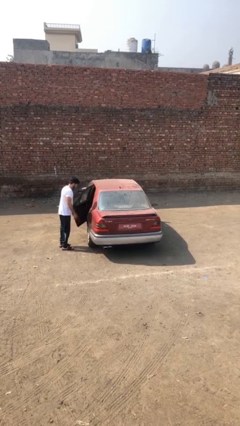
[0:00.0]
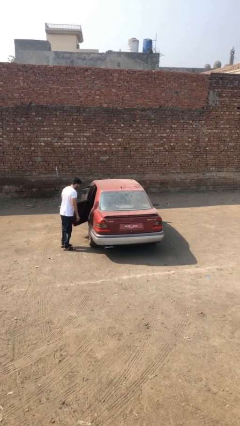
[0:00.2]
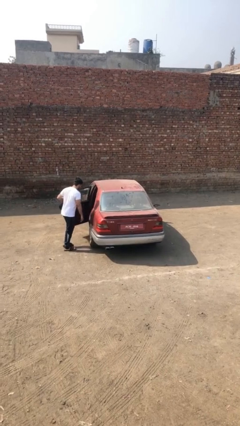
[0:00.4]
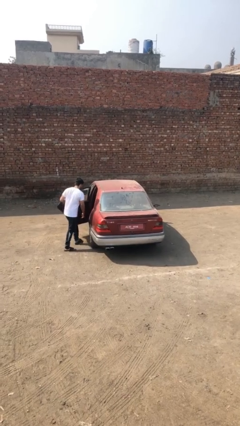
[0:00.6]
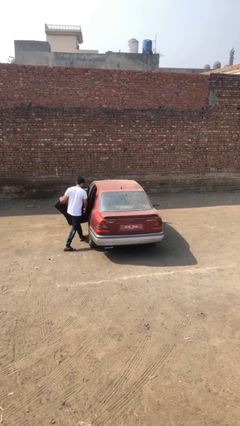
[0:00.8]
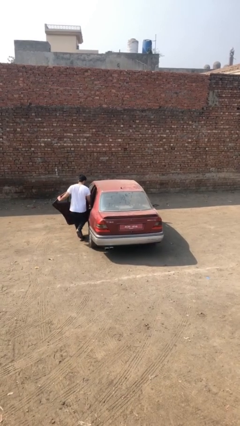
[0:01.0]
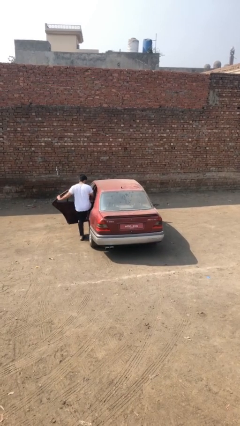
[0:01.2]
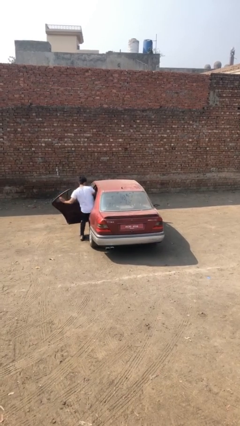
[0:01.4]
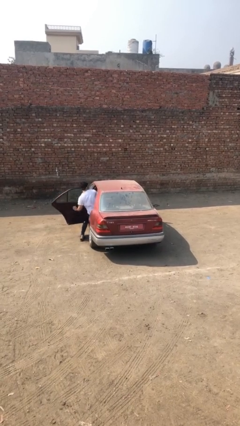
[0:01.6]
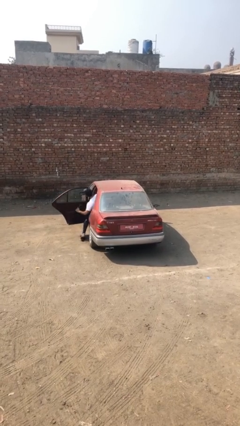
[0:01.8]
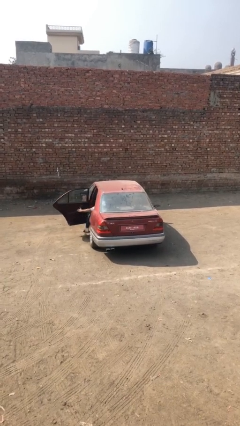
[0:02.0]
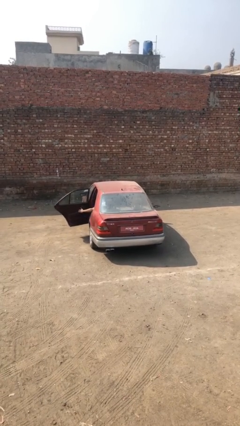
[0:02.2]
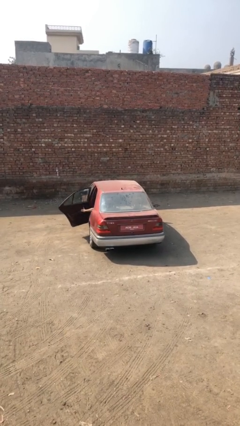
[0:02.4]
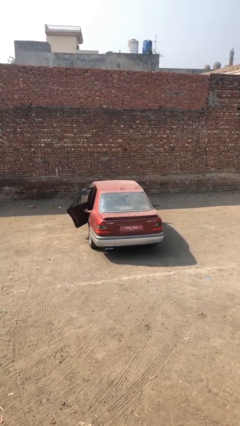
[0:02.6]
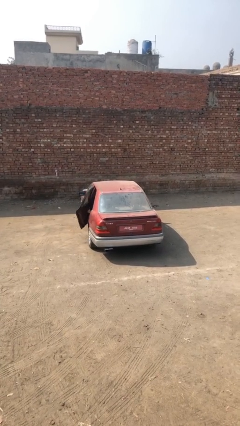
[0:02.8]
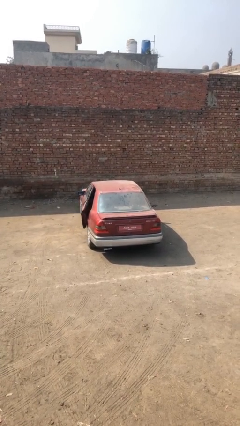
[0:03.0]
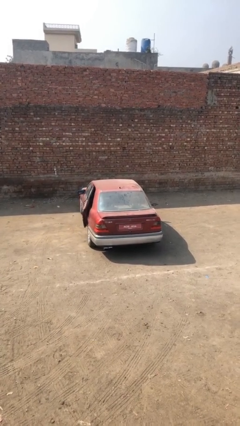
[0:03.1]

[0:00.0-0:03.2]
car picks up person

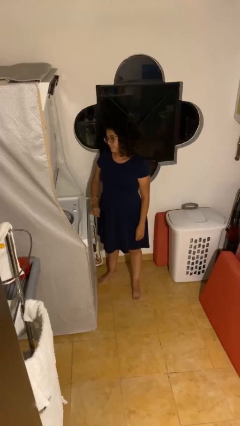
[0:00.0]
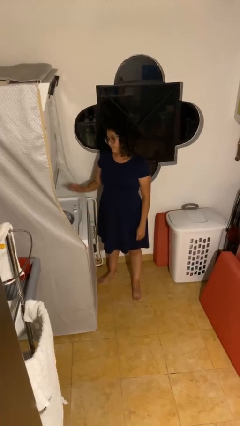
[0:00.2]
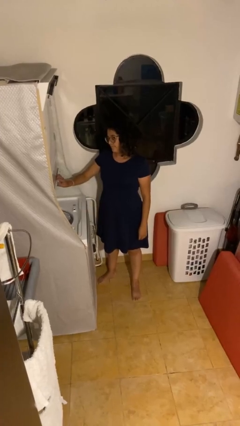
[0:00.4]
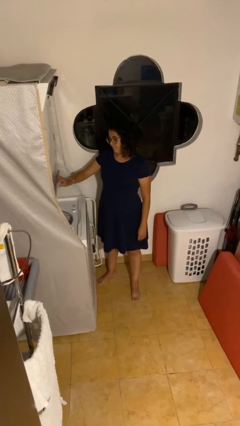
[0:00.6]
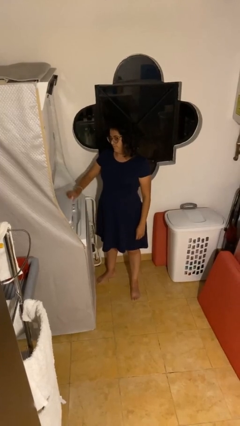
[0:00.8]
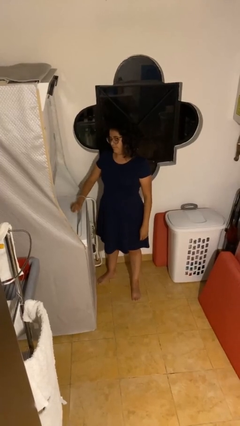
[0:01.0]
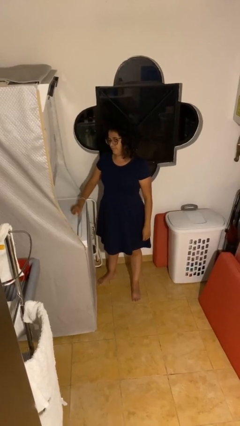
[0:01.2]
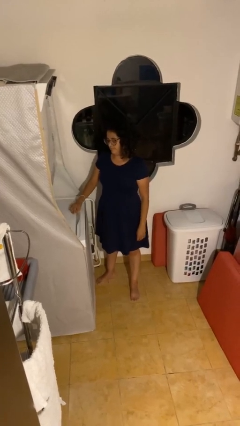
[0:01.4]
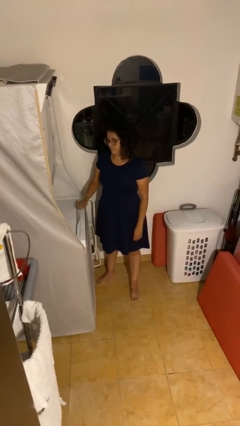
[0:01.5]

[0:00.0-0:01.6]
person closes clothes washer

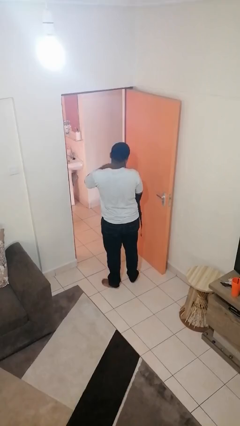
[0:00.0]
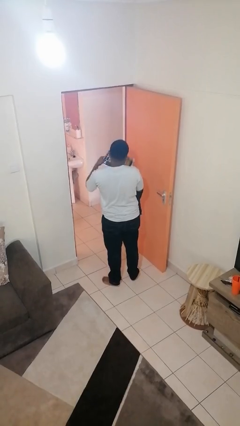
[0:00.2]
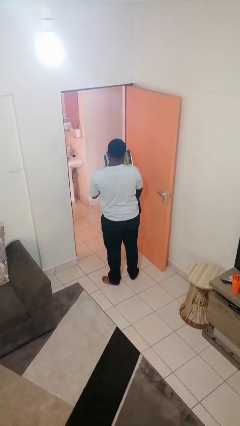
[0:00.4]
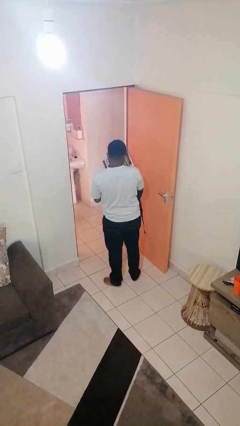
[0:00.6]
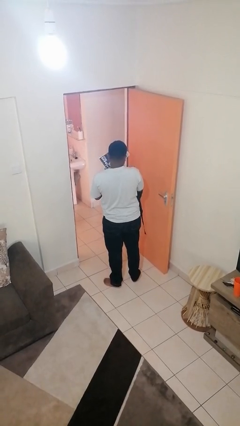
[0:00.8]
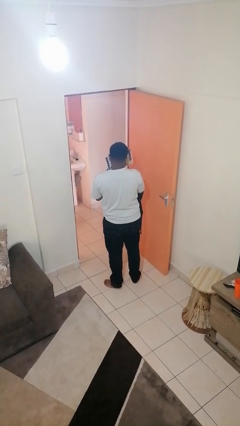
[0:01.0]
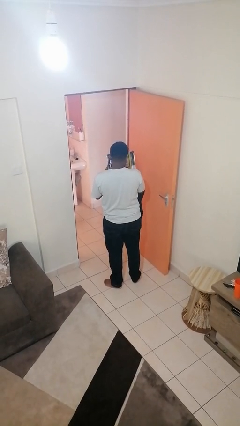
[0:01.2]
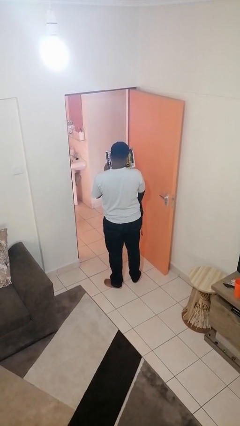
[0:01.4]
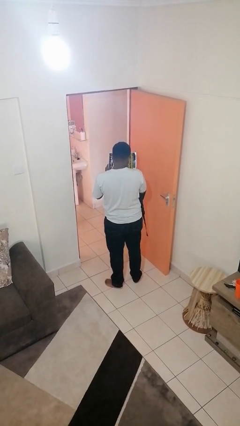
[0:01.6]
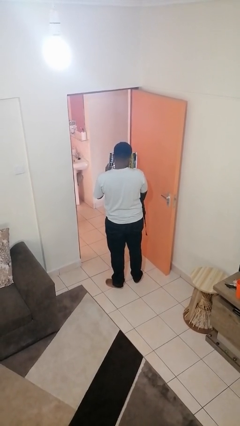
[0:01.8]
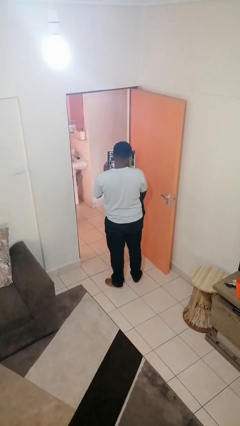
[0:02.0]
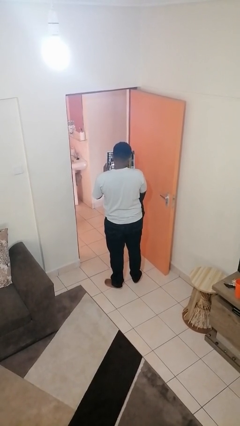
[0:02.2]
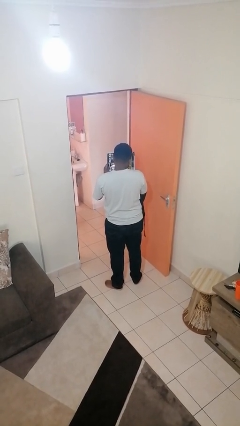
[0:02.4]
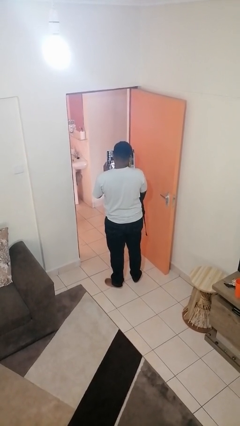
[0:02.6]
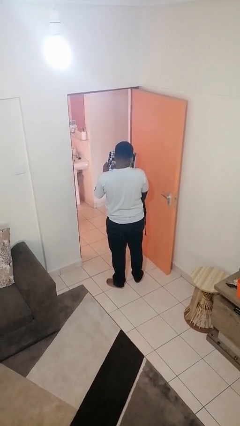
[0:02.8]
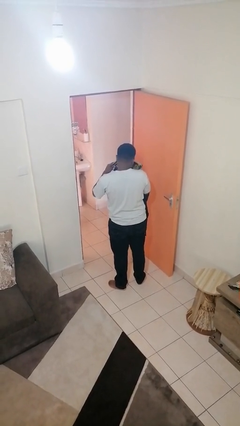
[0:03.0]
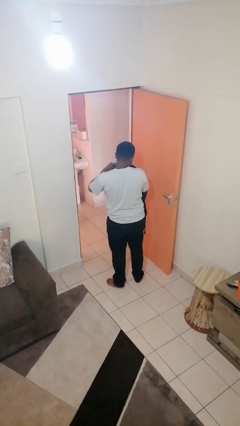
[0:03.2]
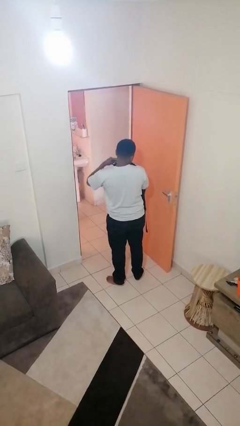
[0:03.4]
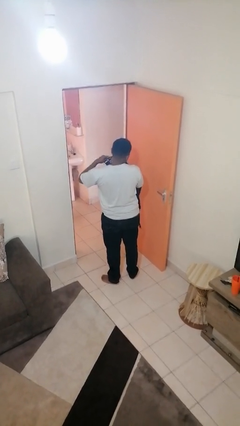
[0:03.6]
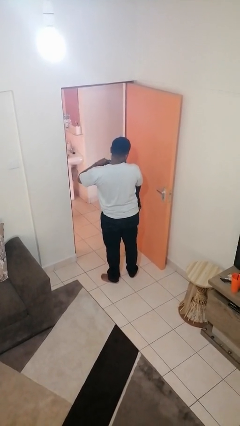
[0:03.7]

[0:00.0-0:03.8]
person takes object from backpack

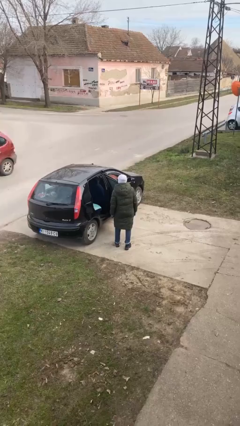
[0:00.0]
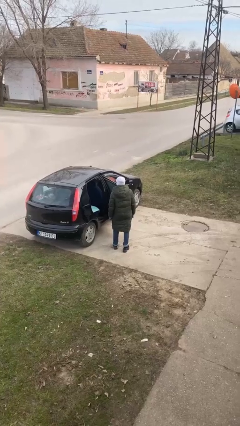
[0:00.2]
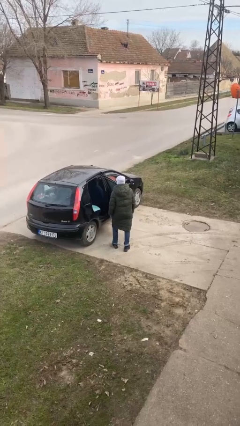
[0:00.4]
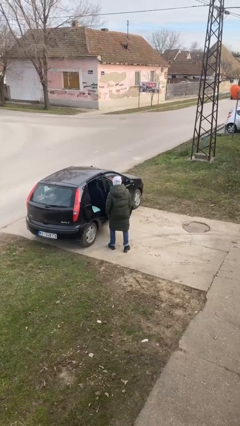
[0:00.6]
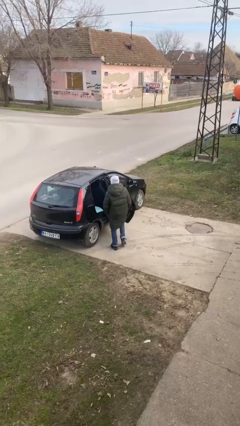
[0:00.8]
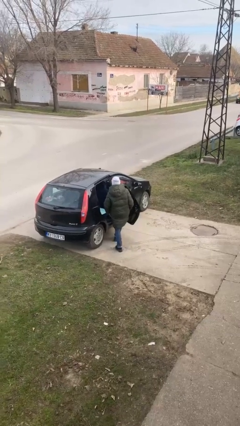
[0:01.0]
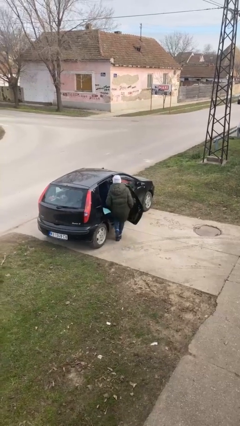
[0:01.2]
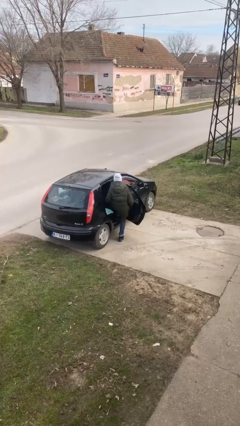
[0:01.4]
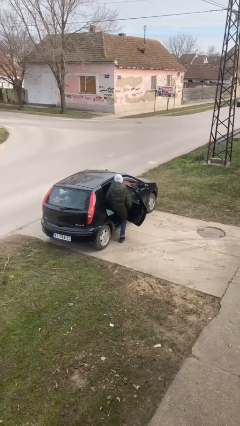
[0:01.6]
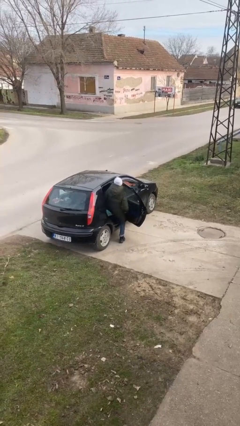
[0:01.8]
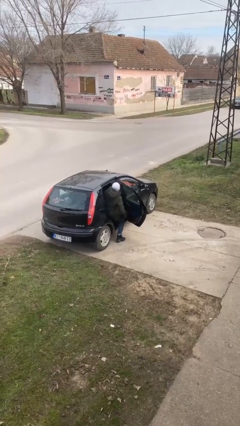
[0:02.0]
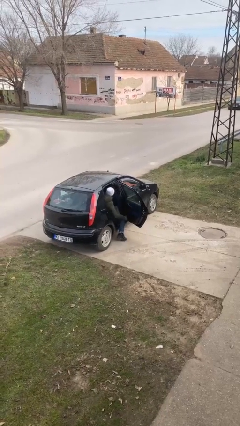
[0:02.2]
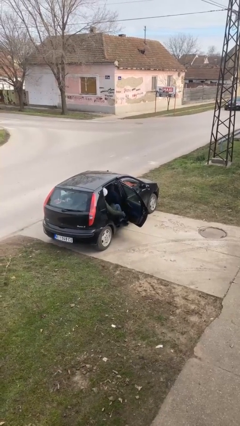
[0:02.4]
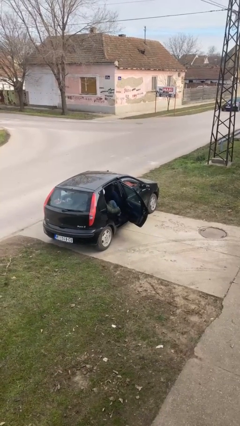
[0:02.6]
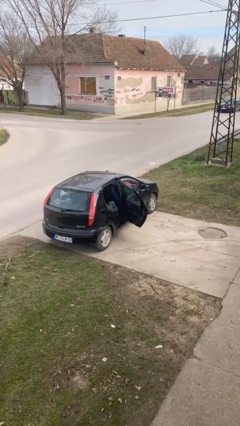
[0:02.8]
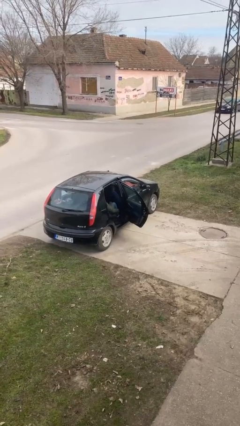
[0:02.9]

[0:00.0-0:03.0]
person enters car

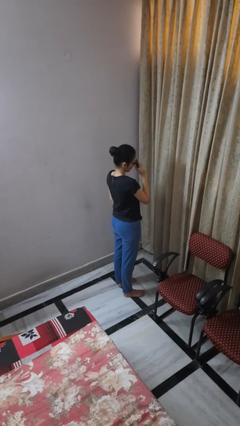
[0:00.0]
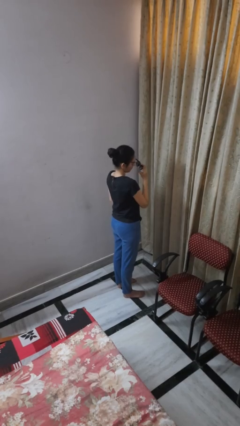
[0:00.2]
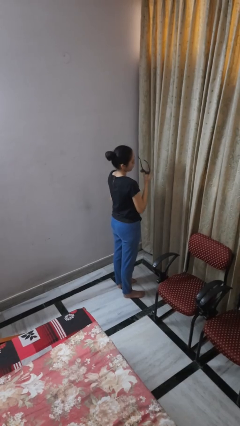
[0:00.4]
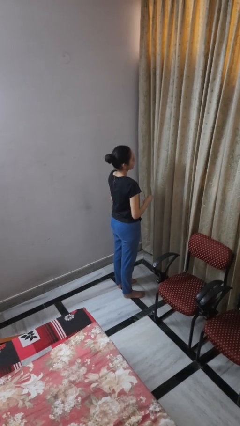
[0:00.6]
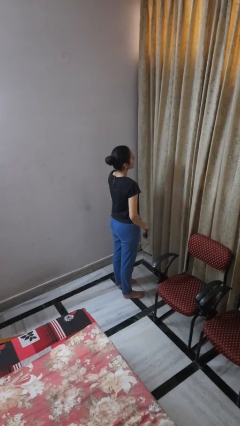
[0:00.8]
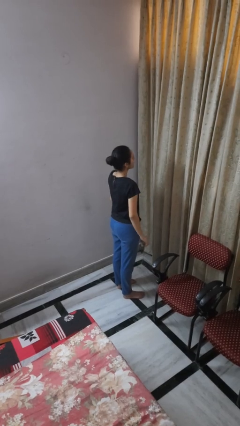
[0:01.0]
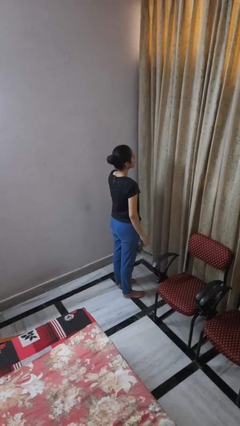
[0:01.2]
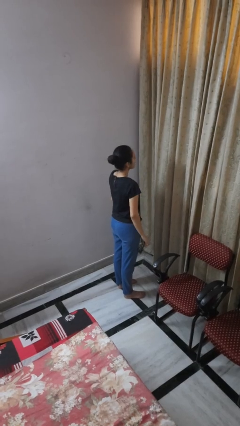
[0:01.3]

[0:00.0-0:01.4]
person takes off sunglasses

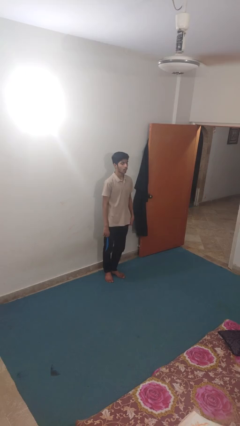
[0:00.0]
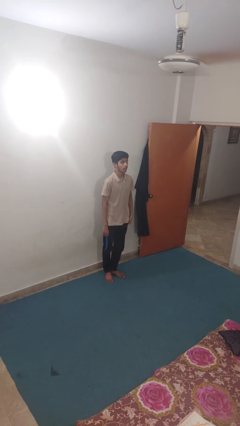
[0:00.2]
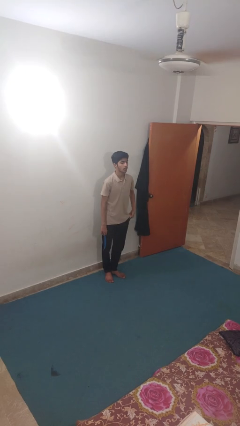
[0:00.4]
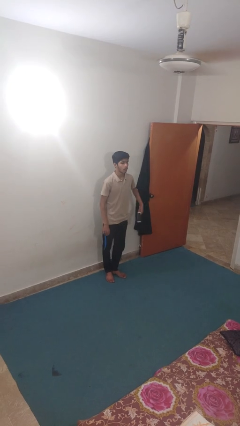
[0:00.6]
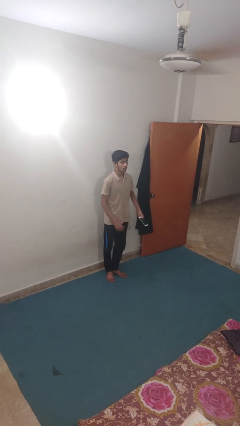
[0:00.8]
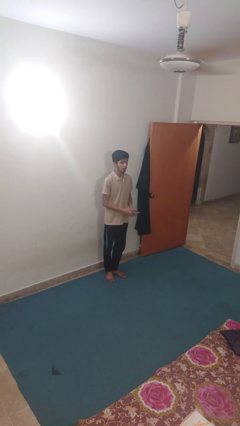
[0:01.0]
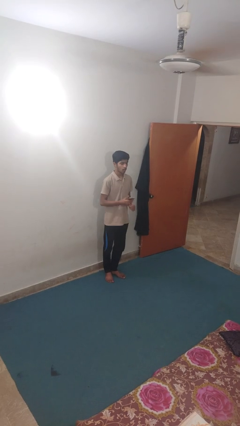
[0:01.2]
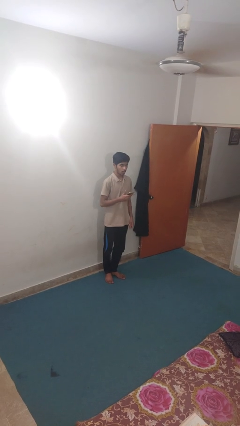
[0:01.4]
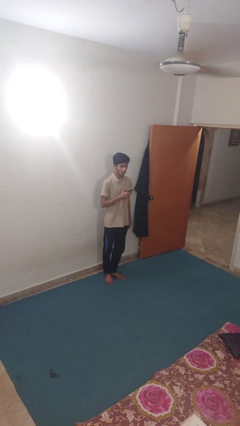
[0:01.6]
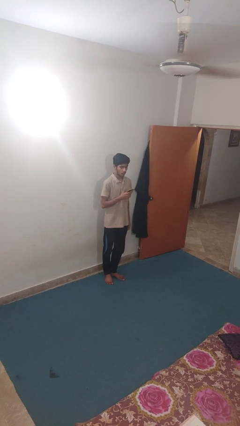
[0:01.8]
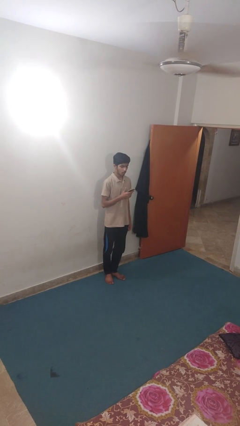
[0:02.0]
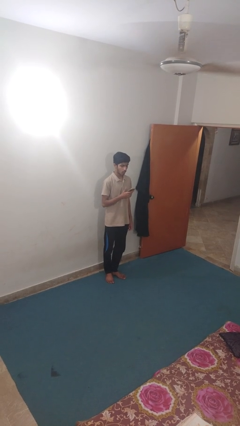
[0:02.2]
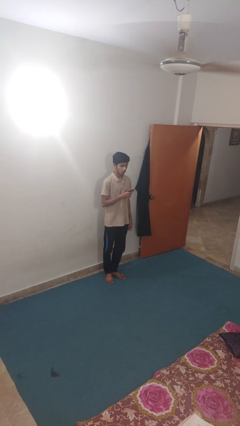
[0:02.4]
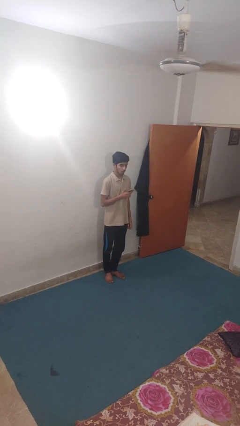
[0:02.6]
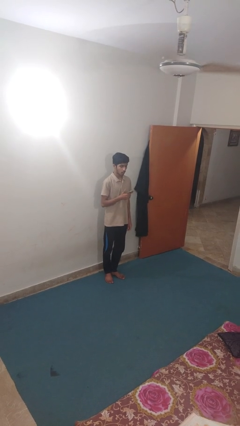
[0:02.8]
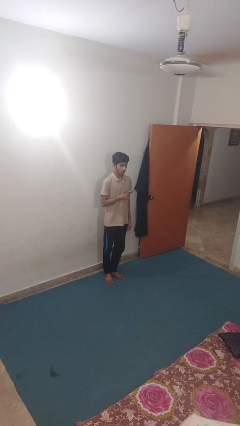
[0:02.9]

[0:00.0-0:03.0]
person takes phone from pocket

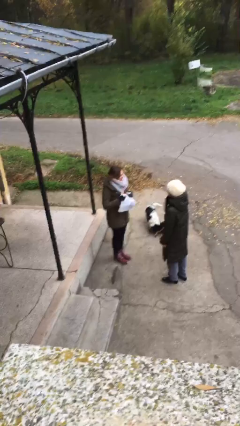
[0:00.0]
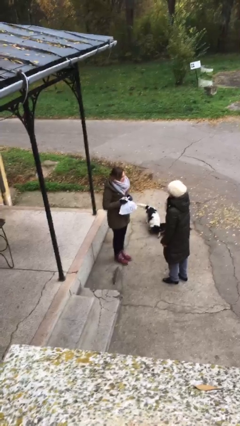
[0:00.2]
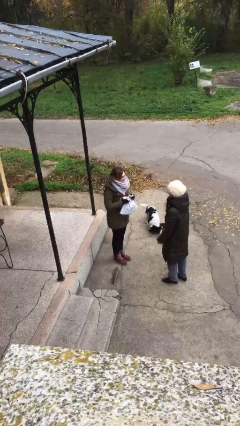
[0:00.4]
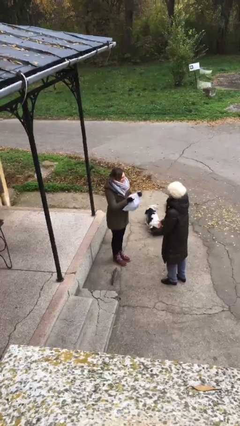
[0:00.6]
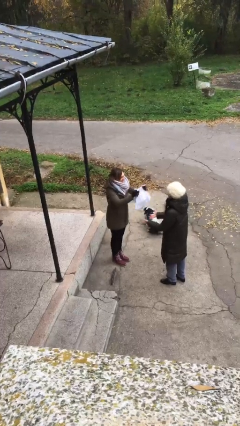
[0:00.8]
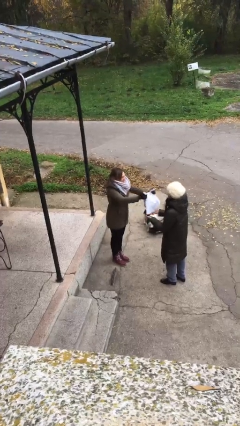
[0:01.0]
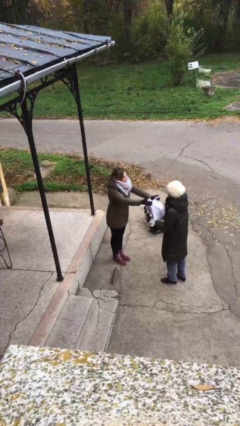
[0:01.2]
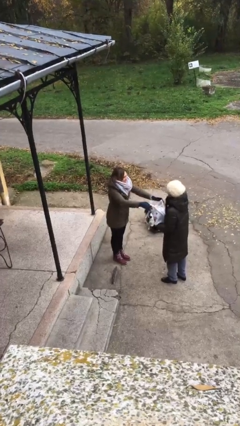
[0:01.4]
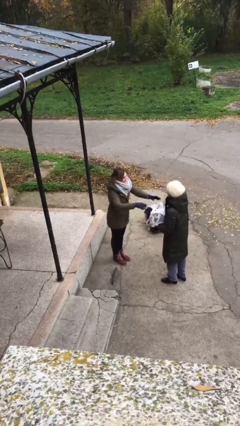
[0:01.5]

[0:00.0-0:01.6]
person transfers object to person
